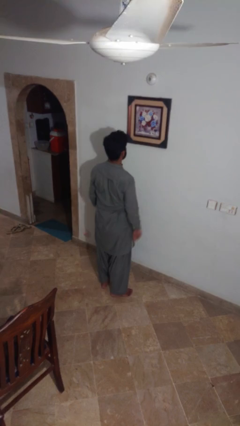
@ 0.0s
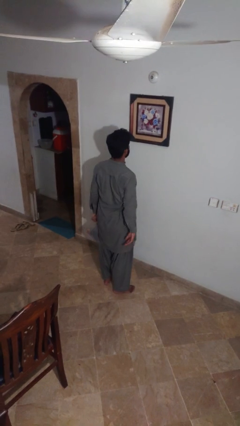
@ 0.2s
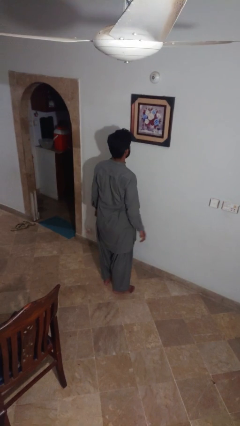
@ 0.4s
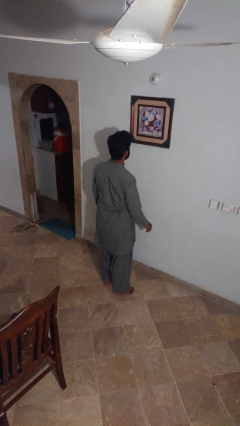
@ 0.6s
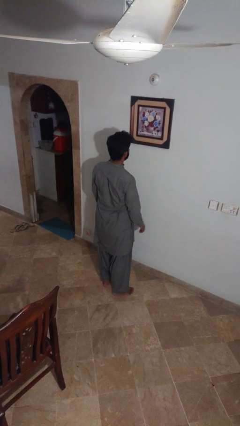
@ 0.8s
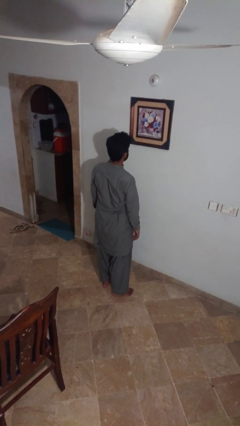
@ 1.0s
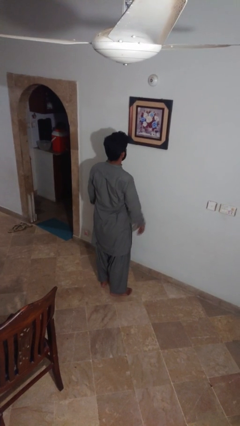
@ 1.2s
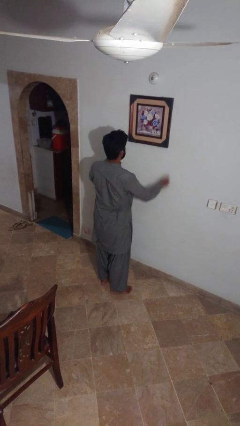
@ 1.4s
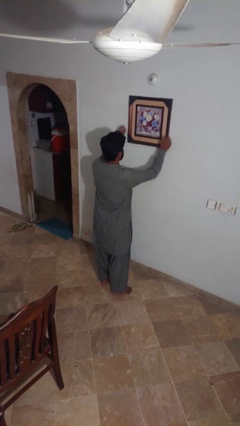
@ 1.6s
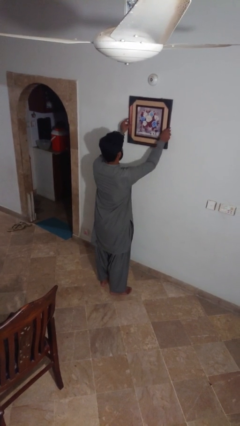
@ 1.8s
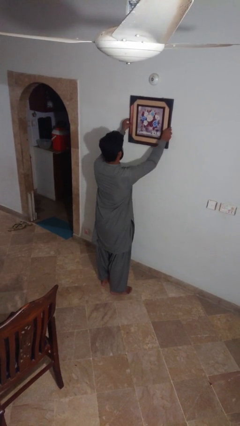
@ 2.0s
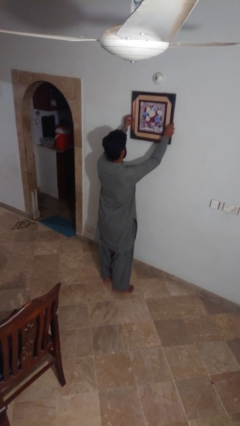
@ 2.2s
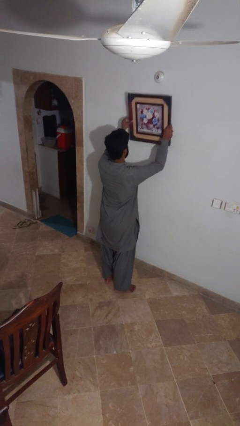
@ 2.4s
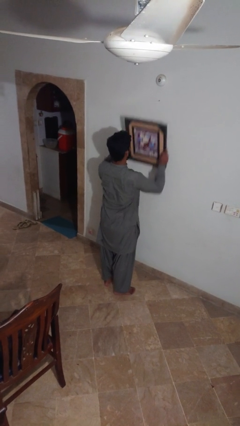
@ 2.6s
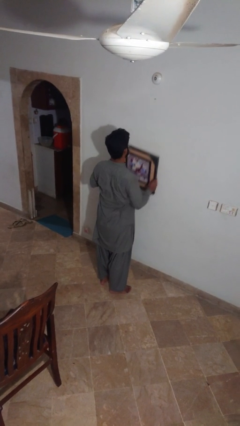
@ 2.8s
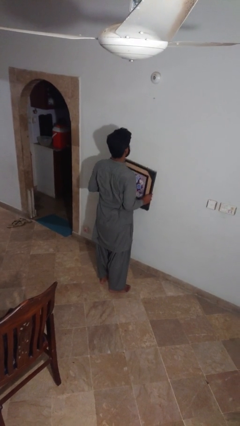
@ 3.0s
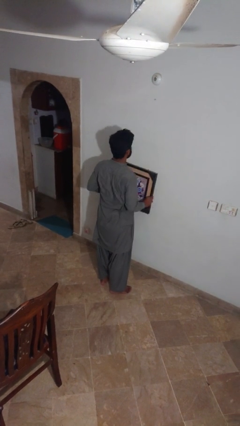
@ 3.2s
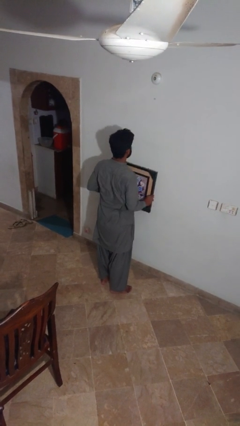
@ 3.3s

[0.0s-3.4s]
person takes down picture frame

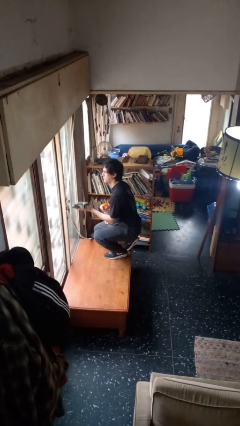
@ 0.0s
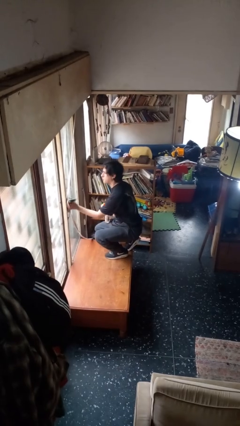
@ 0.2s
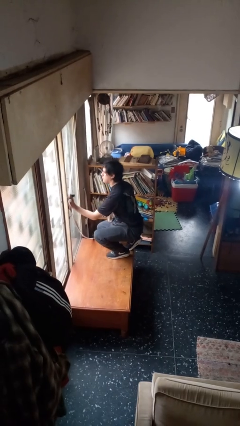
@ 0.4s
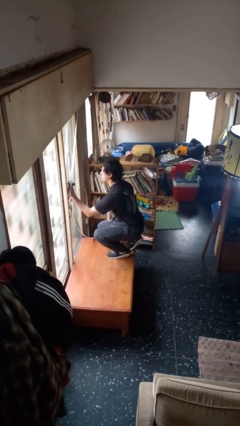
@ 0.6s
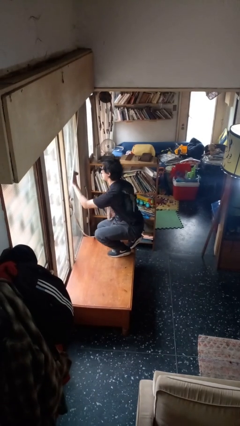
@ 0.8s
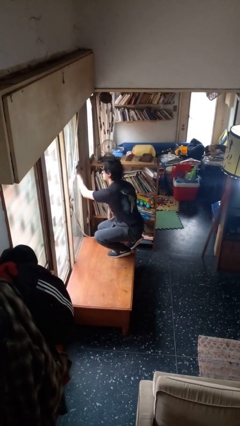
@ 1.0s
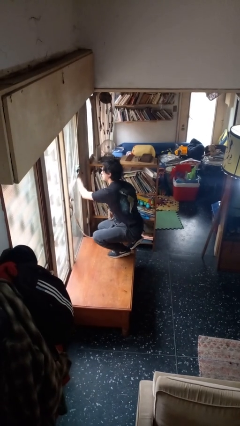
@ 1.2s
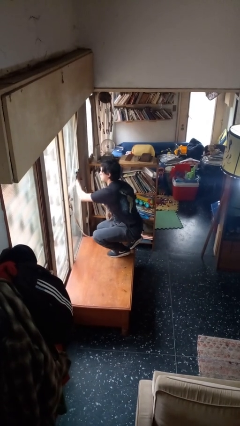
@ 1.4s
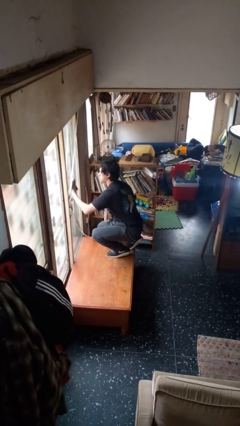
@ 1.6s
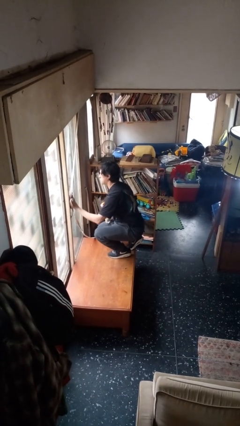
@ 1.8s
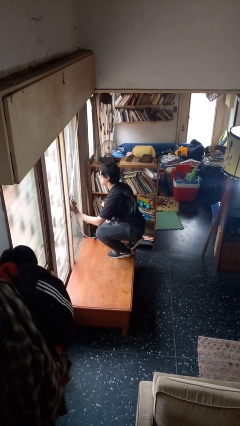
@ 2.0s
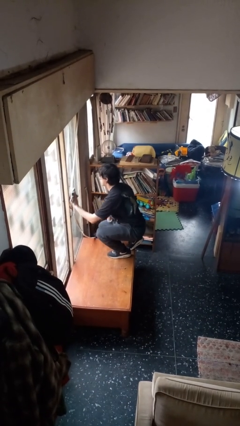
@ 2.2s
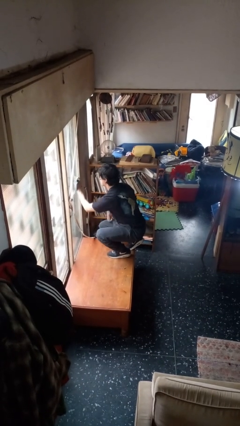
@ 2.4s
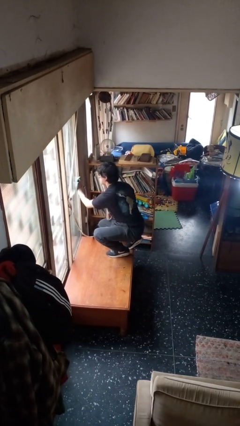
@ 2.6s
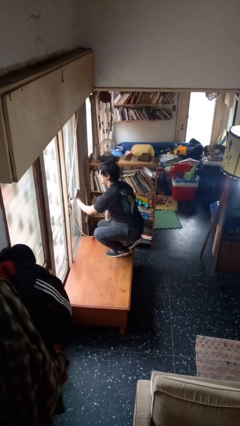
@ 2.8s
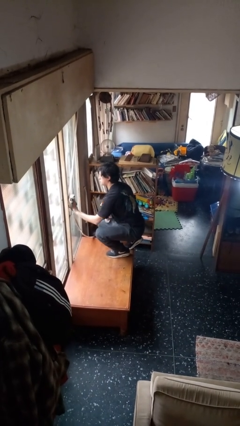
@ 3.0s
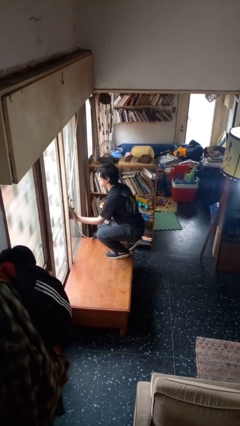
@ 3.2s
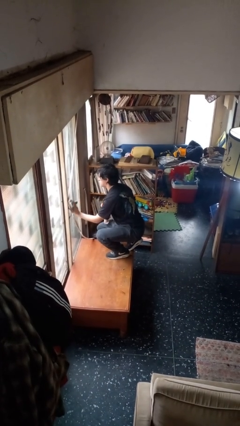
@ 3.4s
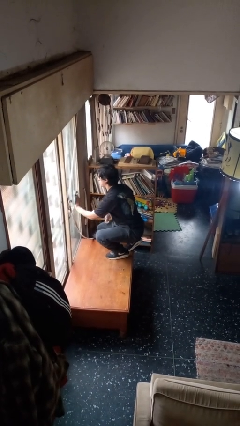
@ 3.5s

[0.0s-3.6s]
person washes window

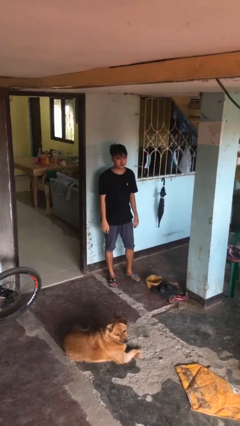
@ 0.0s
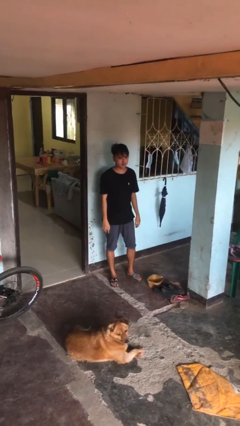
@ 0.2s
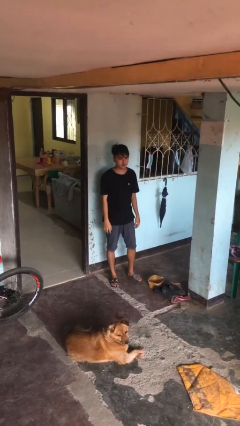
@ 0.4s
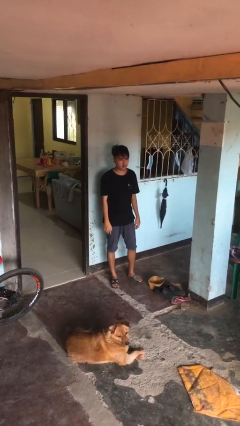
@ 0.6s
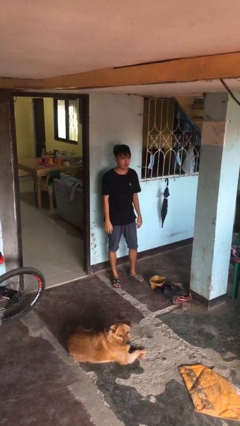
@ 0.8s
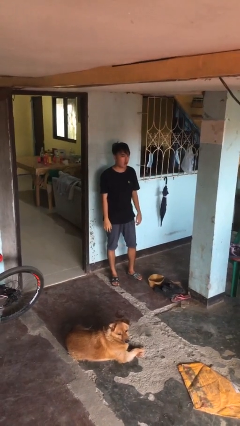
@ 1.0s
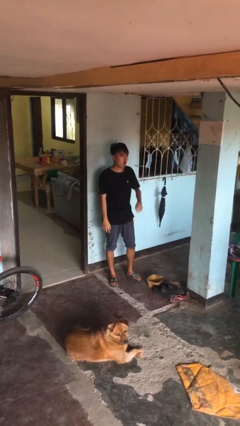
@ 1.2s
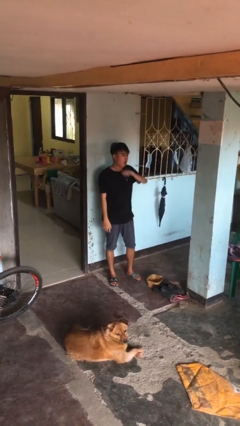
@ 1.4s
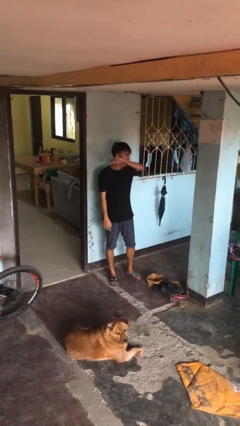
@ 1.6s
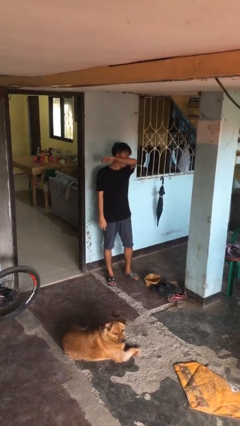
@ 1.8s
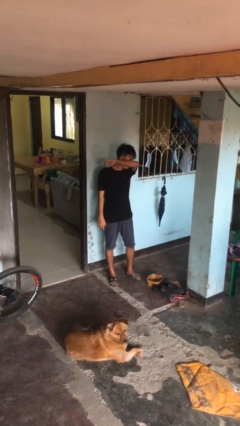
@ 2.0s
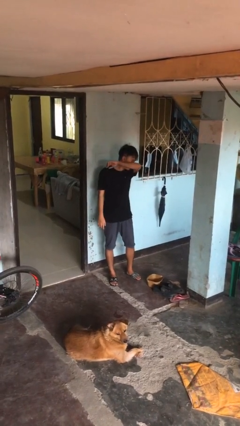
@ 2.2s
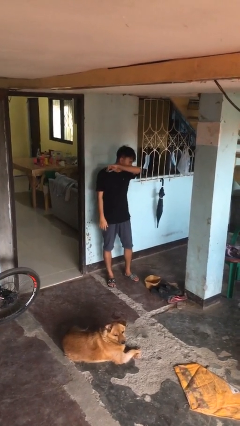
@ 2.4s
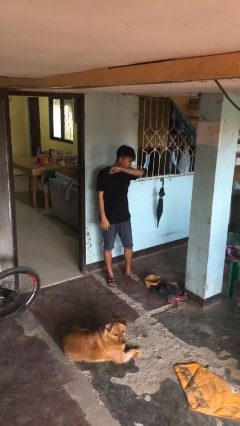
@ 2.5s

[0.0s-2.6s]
person sneezes into arm

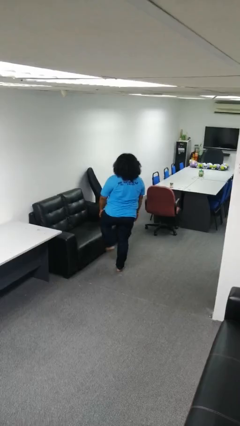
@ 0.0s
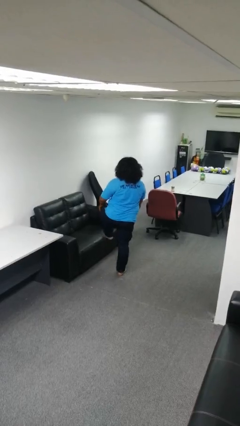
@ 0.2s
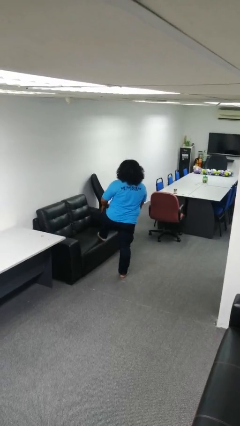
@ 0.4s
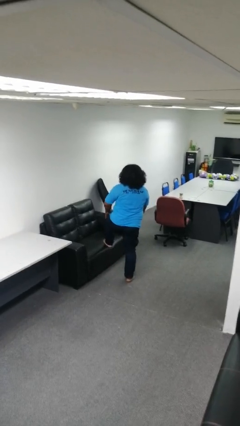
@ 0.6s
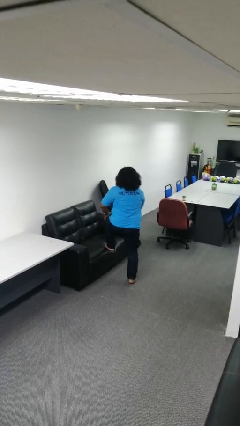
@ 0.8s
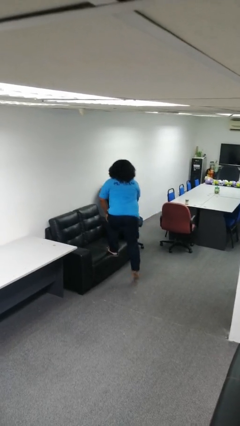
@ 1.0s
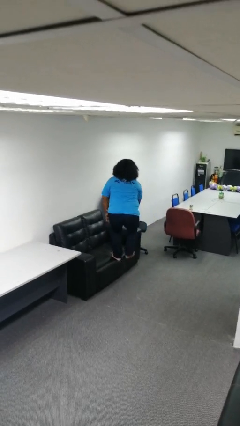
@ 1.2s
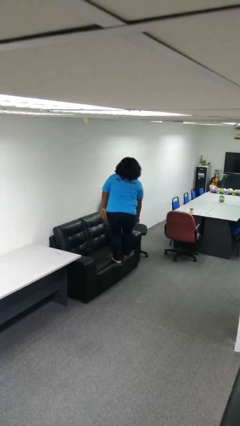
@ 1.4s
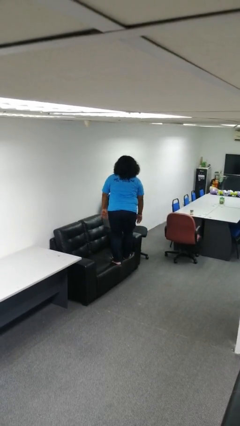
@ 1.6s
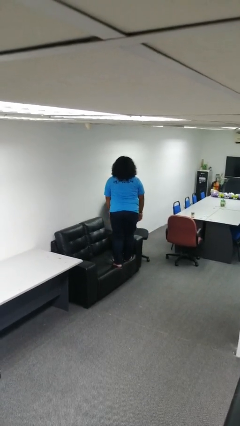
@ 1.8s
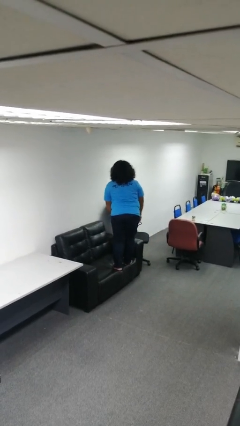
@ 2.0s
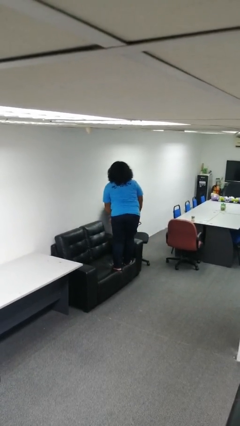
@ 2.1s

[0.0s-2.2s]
person climbs on couch

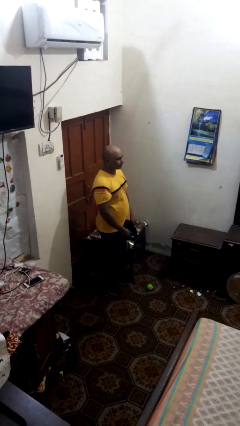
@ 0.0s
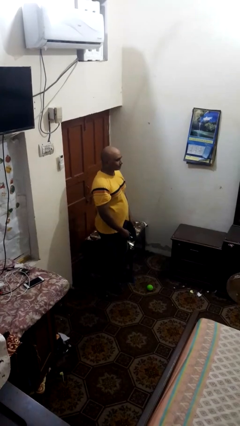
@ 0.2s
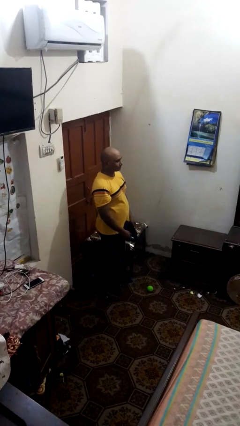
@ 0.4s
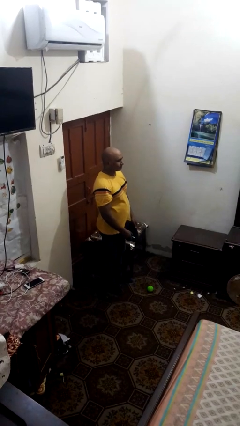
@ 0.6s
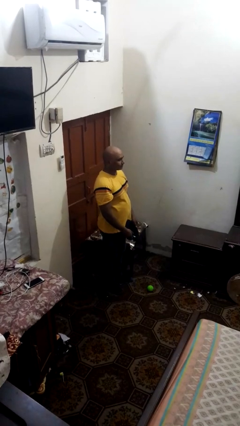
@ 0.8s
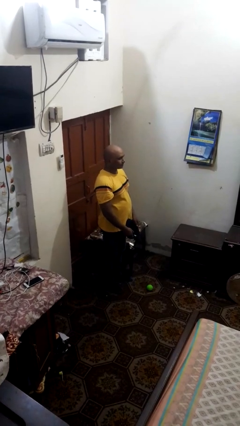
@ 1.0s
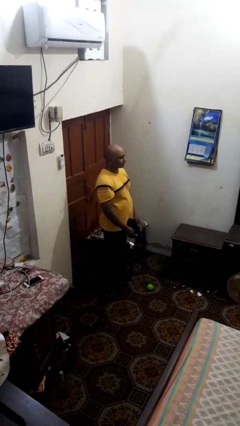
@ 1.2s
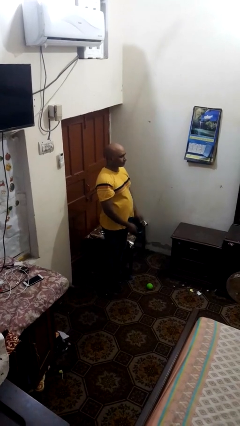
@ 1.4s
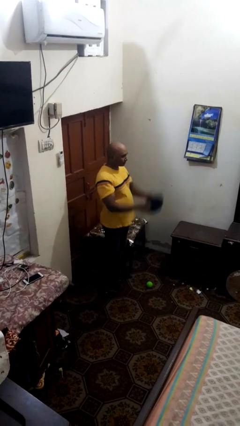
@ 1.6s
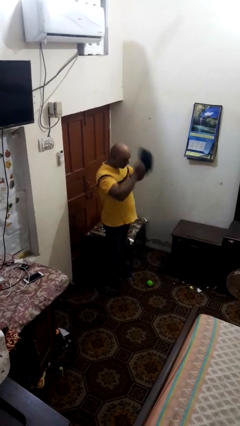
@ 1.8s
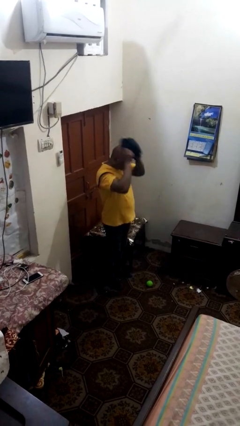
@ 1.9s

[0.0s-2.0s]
person takes off hat

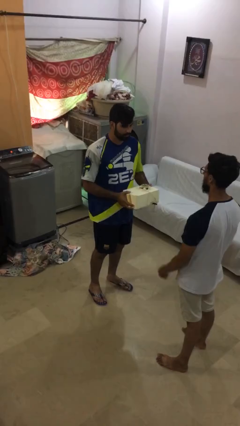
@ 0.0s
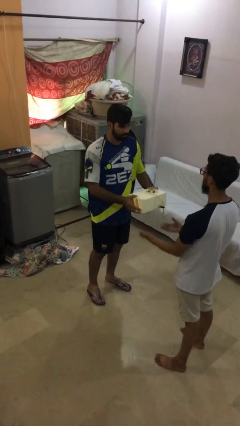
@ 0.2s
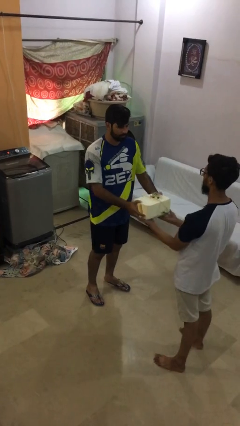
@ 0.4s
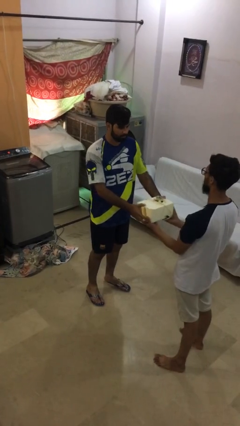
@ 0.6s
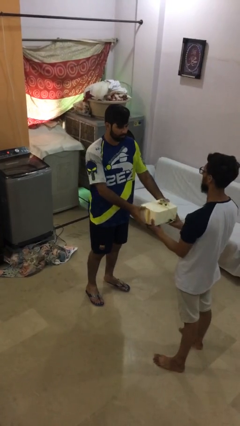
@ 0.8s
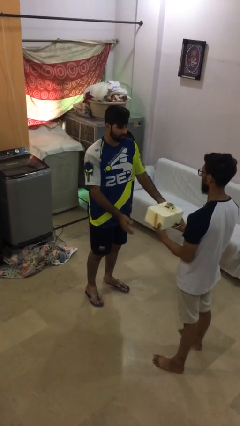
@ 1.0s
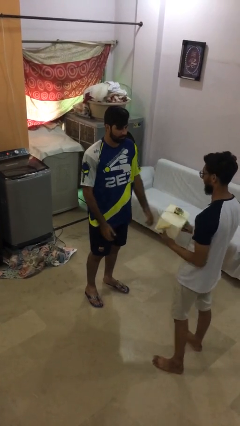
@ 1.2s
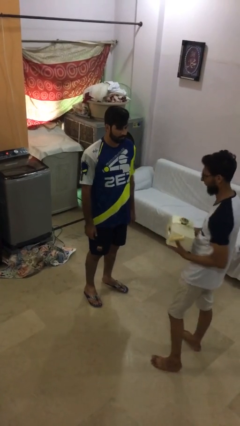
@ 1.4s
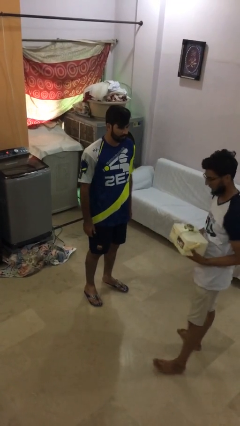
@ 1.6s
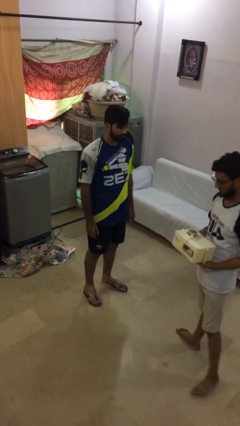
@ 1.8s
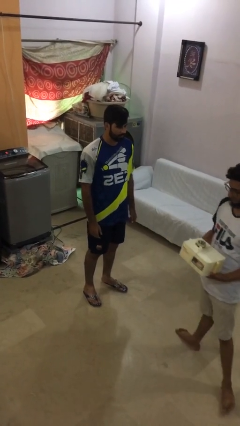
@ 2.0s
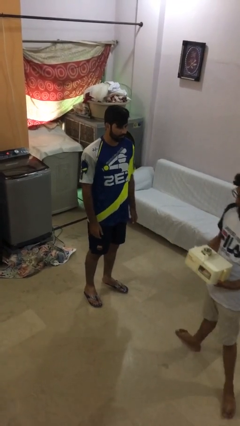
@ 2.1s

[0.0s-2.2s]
person transfers object to person

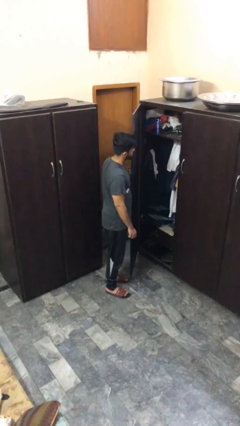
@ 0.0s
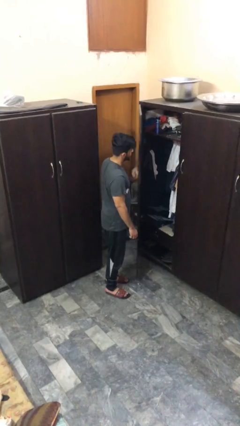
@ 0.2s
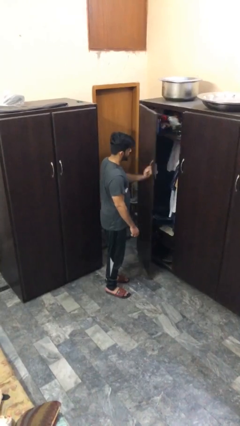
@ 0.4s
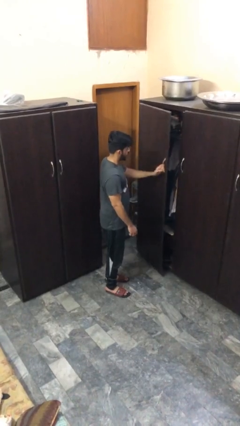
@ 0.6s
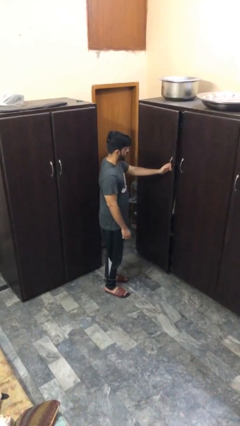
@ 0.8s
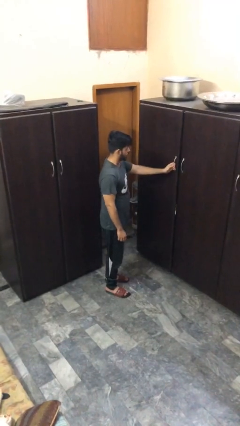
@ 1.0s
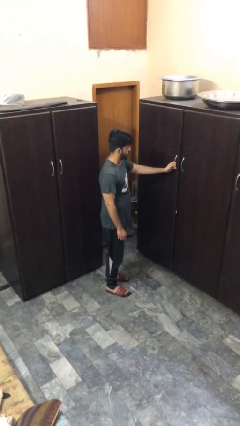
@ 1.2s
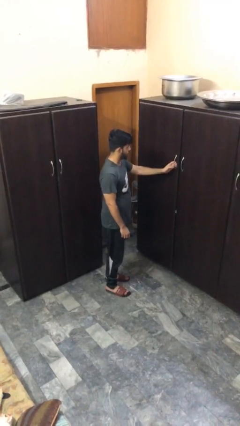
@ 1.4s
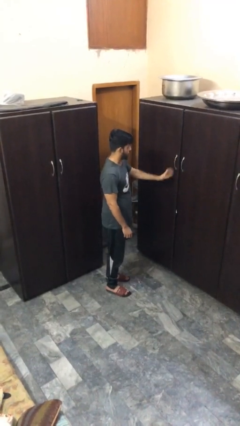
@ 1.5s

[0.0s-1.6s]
person closes dresser drawer
